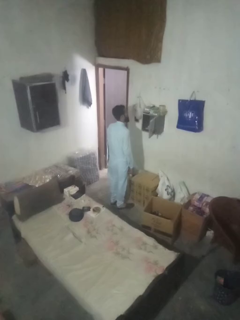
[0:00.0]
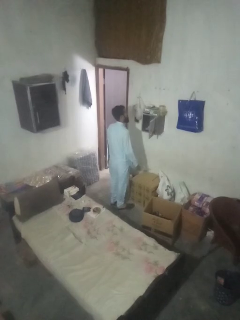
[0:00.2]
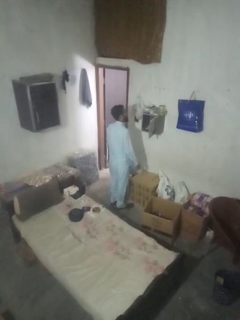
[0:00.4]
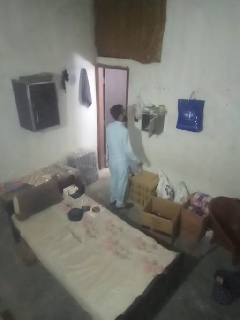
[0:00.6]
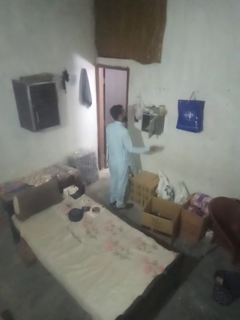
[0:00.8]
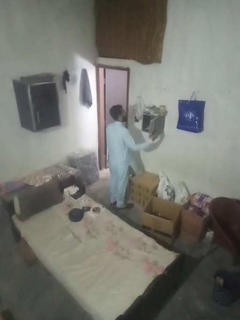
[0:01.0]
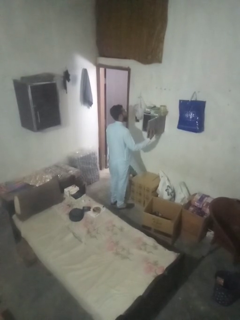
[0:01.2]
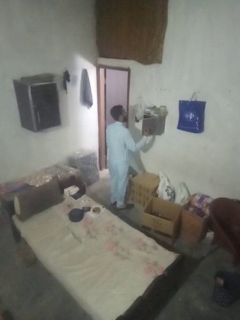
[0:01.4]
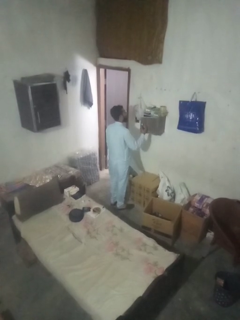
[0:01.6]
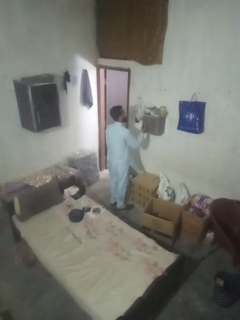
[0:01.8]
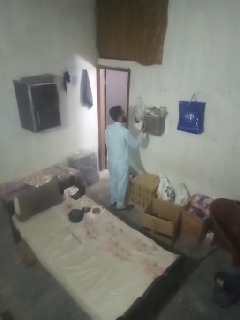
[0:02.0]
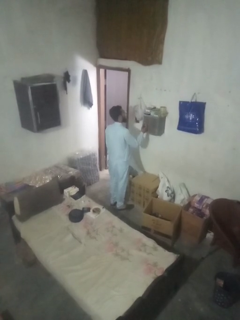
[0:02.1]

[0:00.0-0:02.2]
person closes mailbox

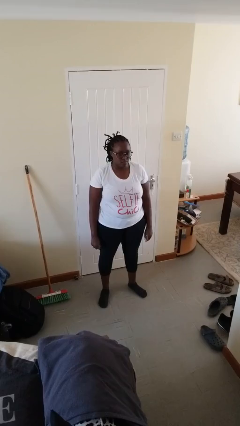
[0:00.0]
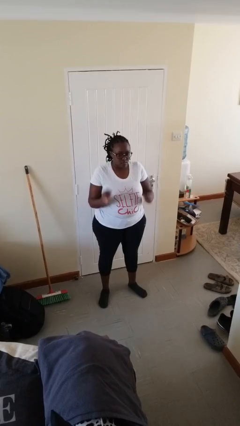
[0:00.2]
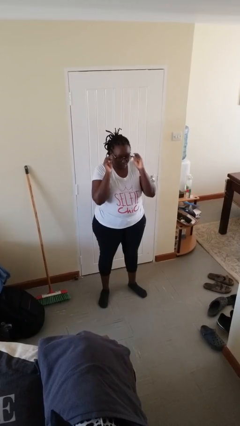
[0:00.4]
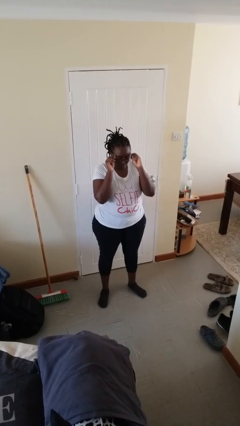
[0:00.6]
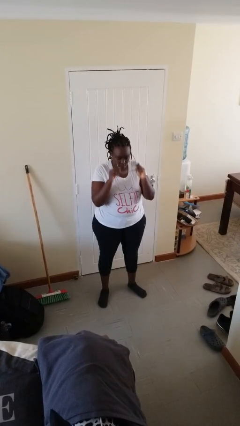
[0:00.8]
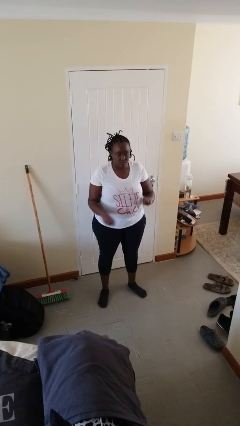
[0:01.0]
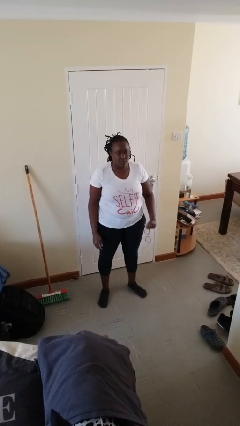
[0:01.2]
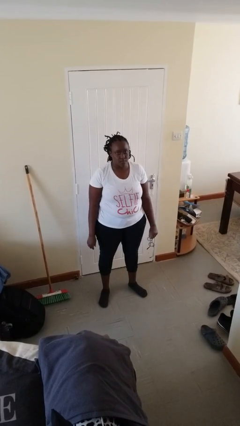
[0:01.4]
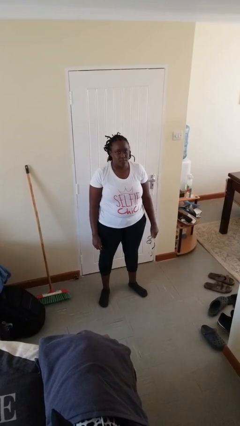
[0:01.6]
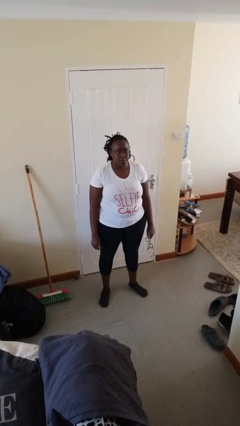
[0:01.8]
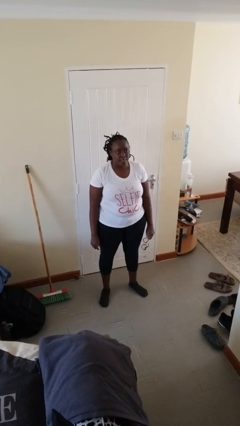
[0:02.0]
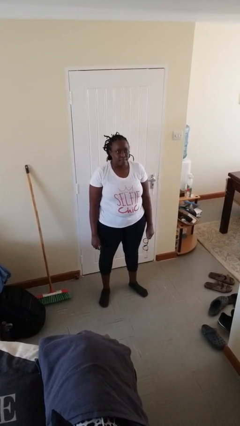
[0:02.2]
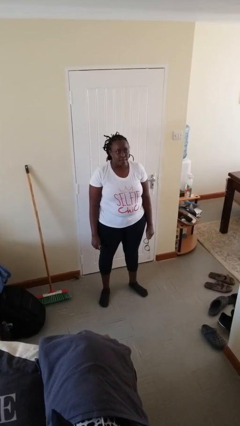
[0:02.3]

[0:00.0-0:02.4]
person takes off glasses

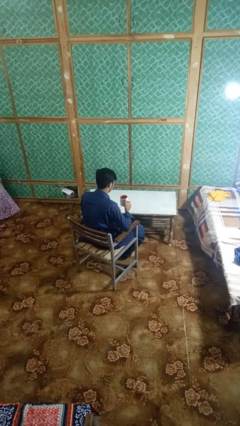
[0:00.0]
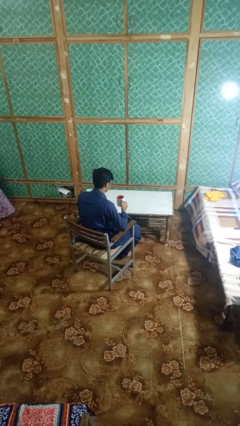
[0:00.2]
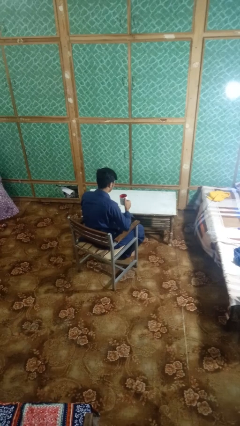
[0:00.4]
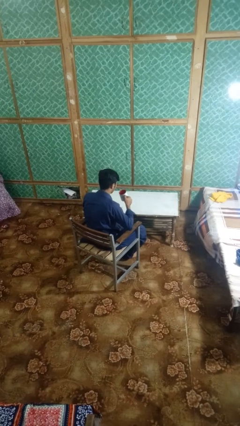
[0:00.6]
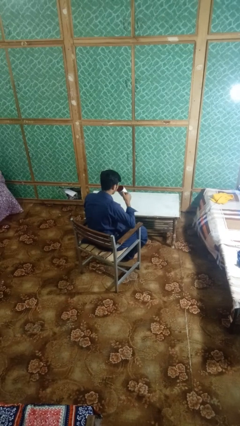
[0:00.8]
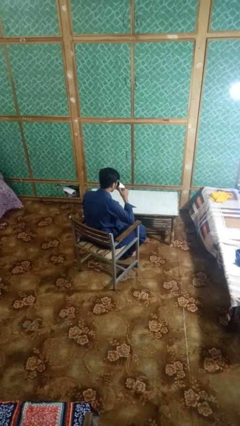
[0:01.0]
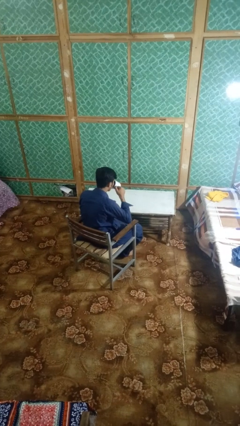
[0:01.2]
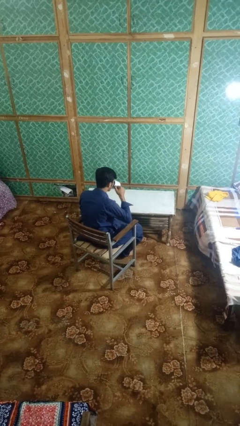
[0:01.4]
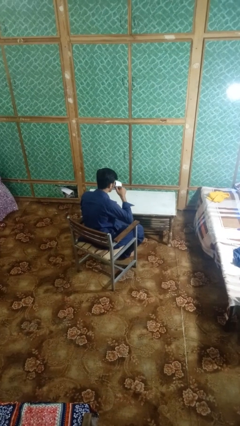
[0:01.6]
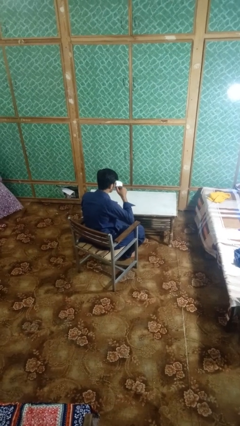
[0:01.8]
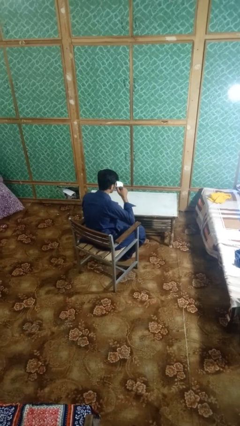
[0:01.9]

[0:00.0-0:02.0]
person drinks from mug

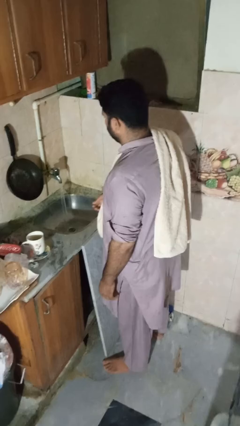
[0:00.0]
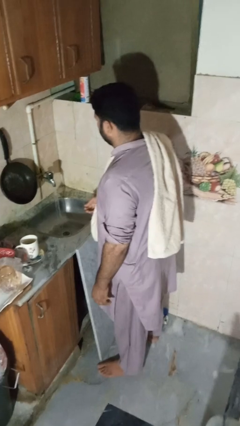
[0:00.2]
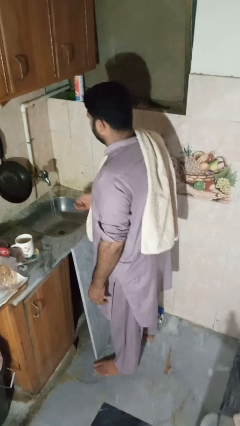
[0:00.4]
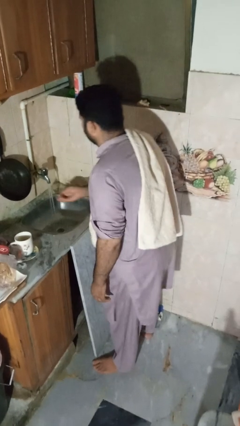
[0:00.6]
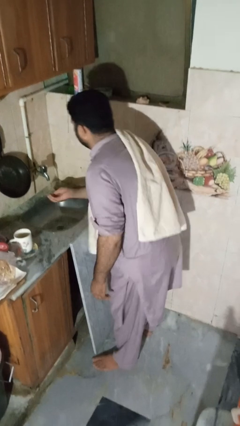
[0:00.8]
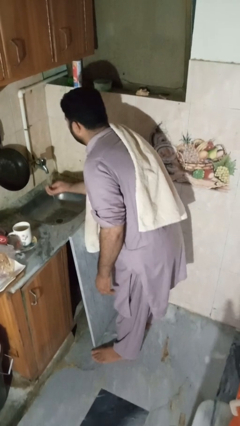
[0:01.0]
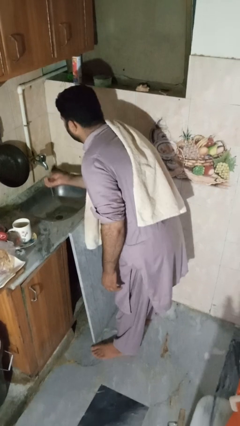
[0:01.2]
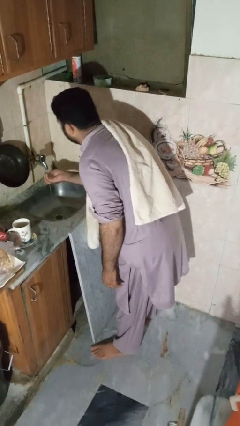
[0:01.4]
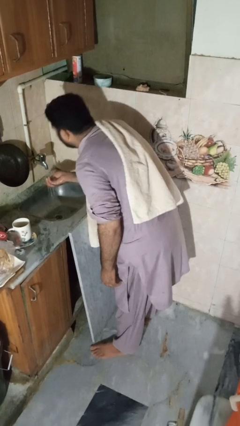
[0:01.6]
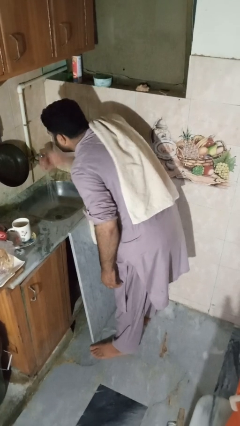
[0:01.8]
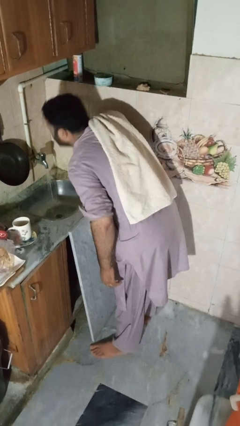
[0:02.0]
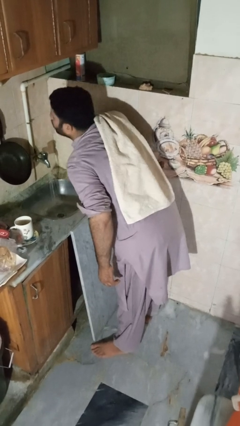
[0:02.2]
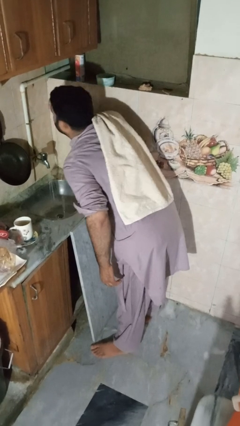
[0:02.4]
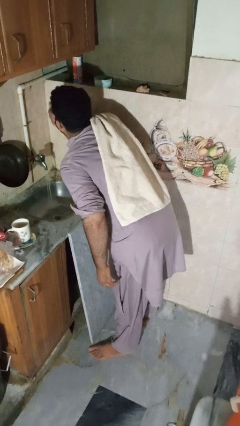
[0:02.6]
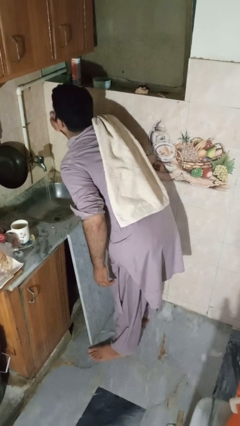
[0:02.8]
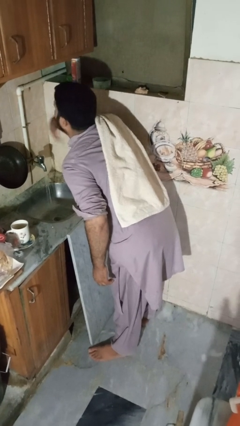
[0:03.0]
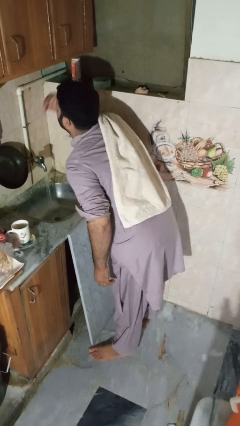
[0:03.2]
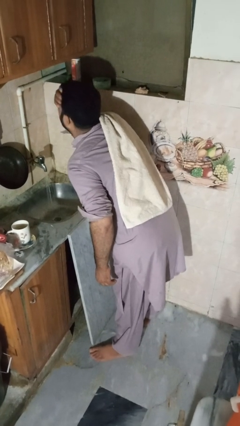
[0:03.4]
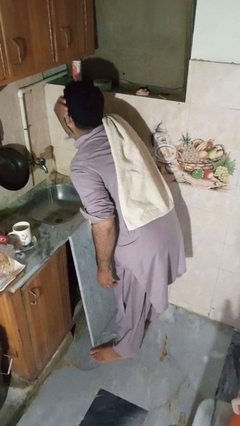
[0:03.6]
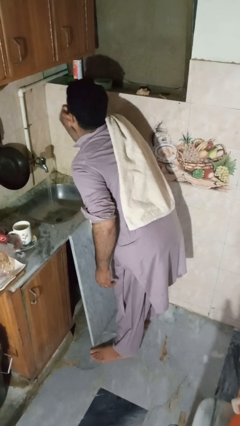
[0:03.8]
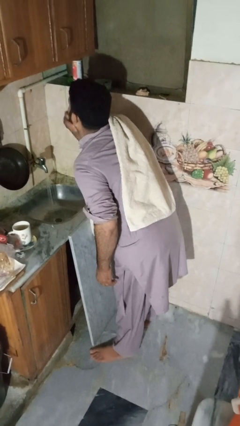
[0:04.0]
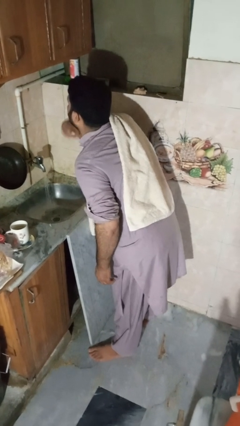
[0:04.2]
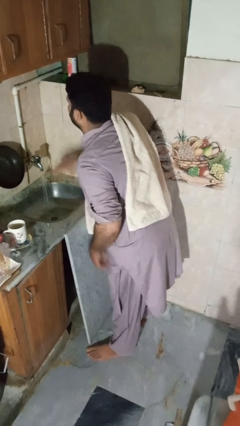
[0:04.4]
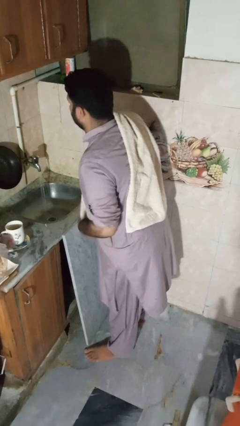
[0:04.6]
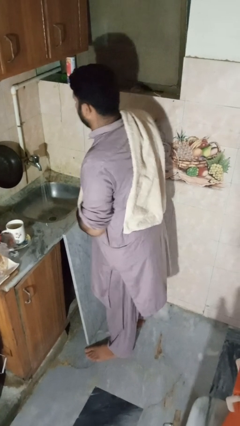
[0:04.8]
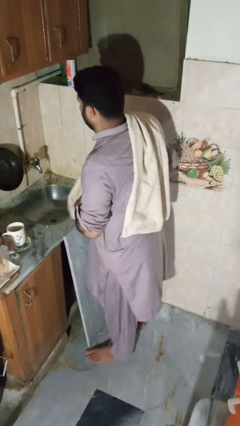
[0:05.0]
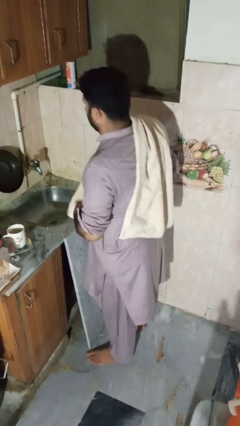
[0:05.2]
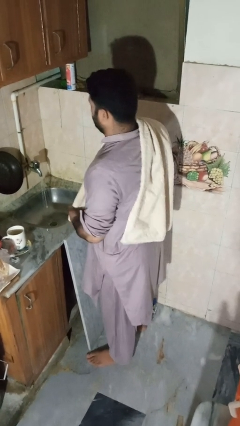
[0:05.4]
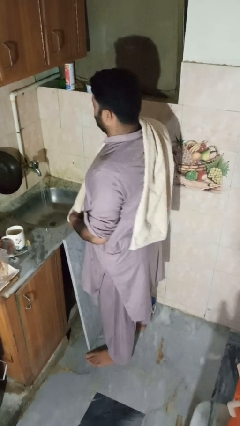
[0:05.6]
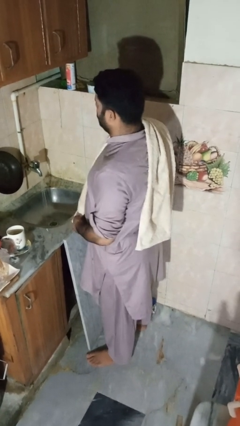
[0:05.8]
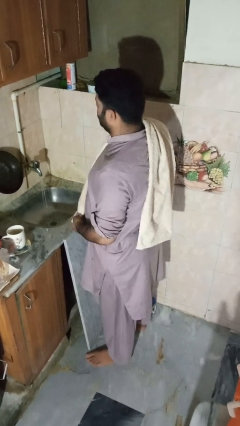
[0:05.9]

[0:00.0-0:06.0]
person washes face

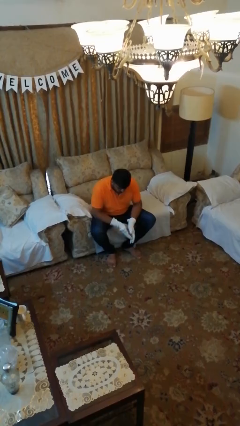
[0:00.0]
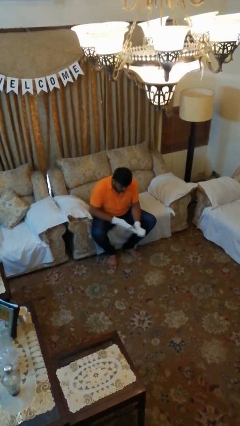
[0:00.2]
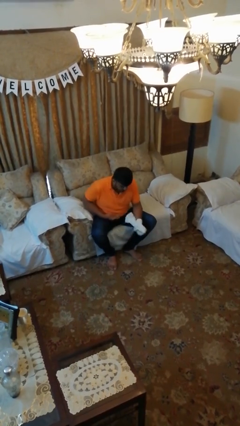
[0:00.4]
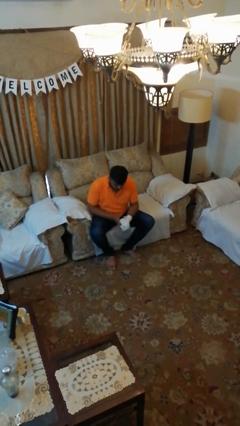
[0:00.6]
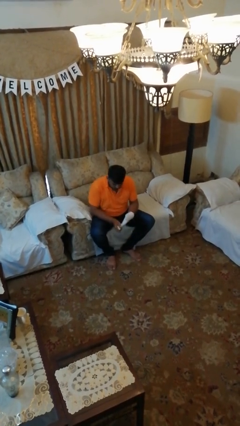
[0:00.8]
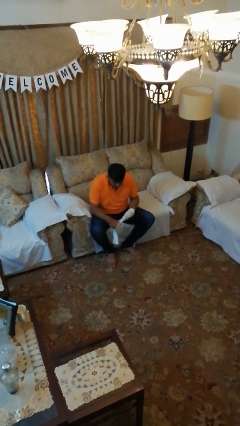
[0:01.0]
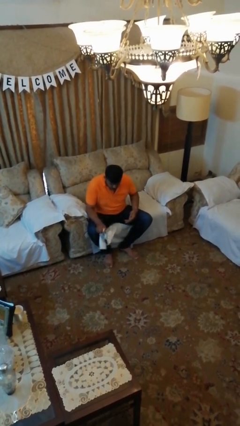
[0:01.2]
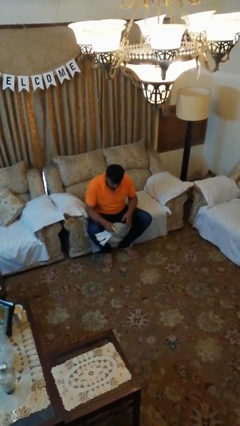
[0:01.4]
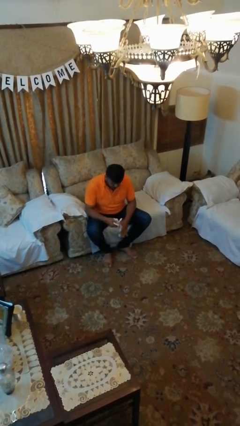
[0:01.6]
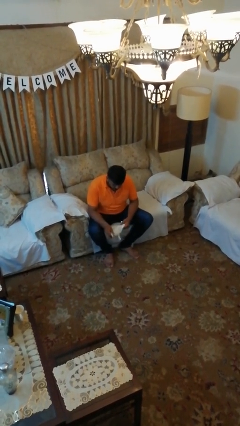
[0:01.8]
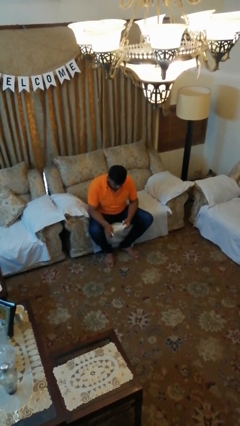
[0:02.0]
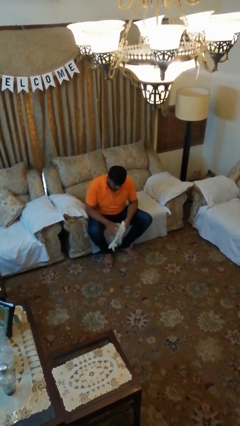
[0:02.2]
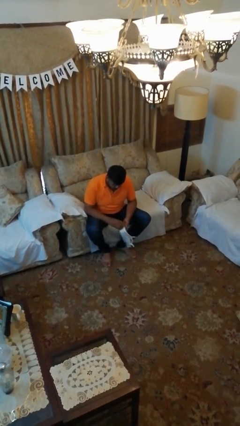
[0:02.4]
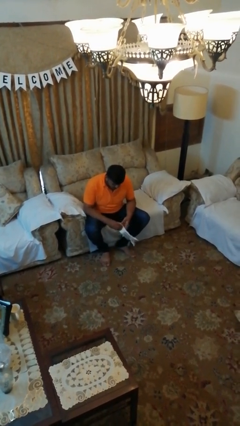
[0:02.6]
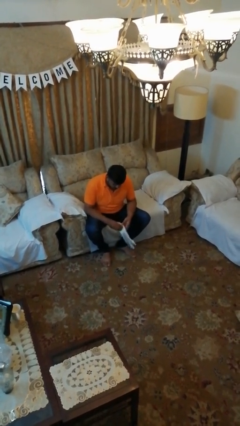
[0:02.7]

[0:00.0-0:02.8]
person takes off gloves

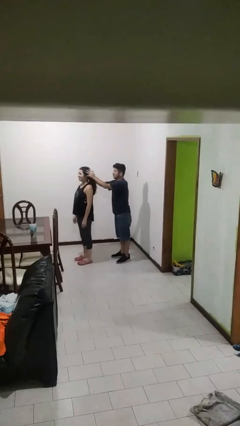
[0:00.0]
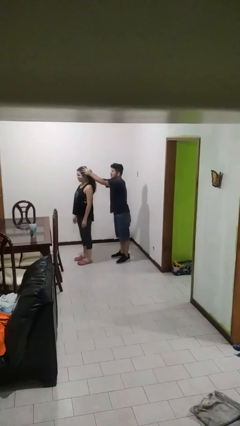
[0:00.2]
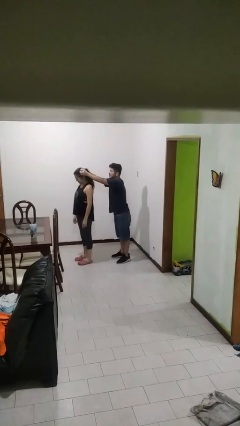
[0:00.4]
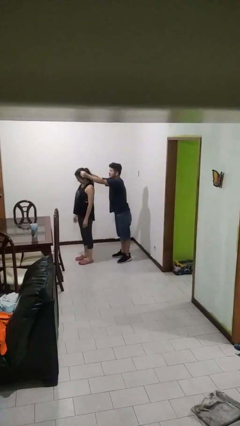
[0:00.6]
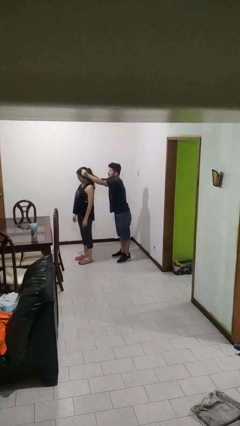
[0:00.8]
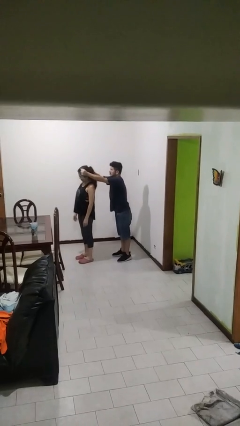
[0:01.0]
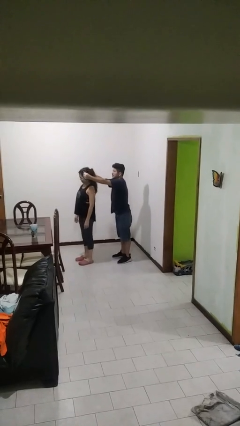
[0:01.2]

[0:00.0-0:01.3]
person grabs person by hair

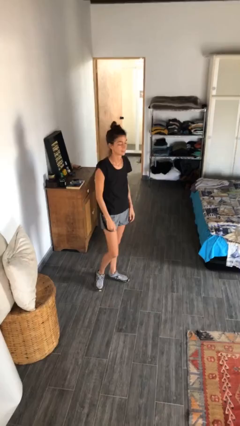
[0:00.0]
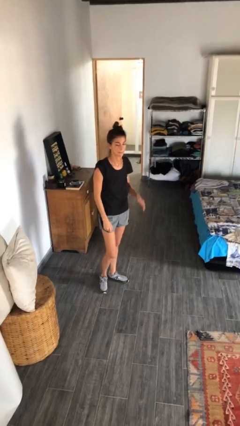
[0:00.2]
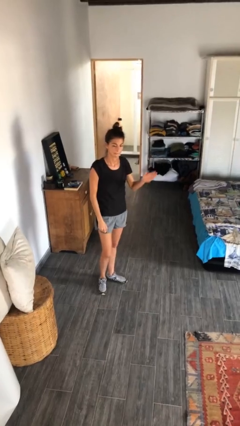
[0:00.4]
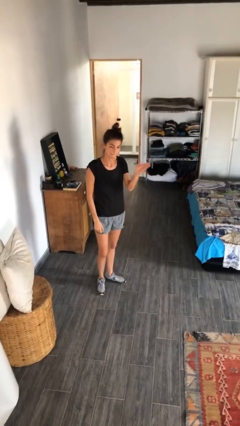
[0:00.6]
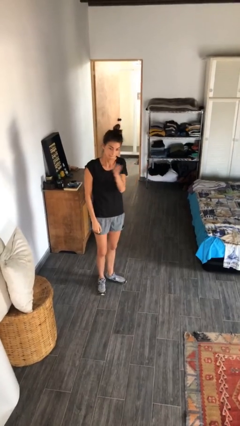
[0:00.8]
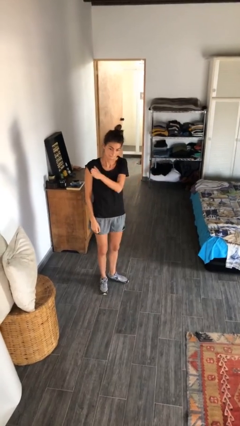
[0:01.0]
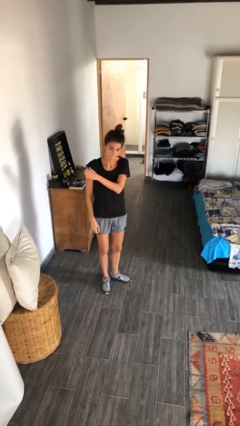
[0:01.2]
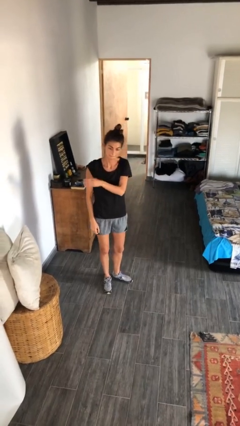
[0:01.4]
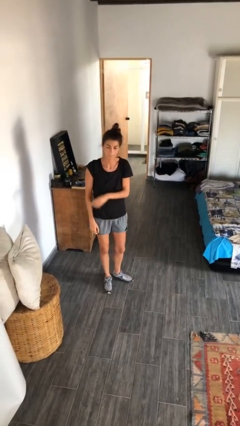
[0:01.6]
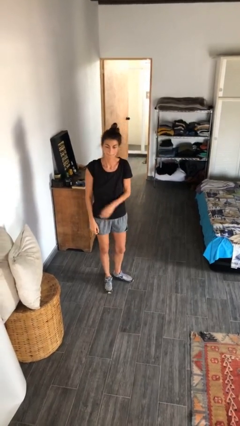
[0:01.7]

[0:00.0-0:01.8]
person gestures swipe left
